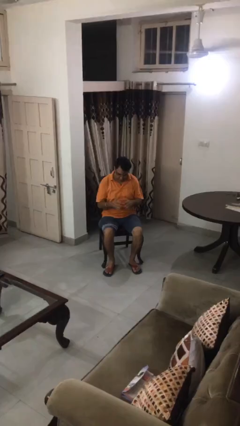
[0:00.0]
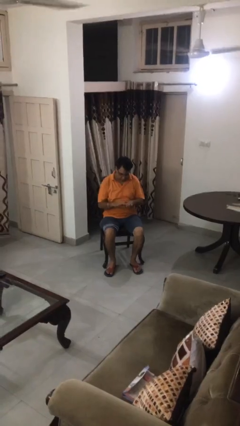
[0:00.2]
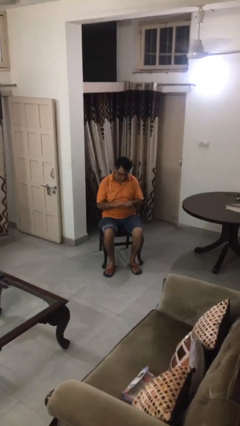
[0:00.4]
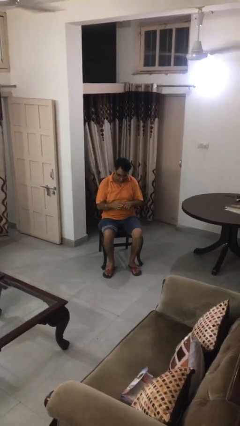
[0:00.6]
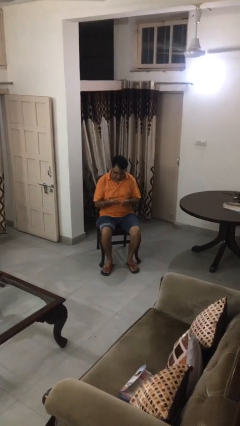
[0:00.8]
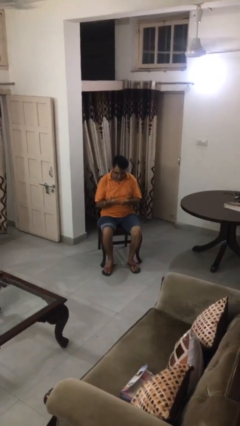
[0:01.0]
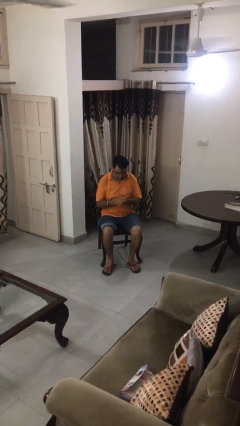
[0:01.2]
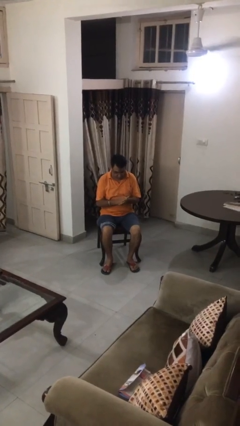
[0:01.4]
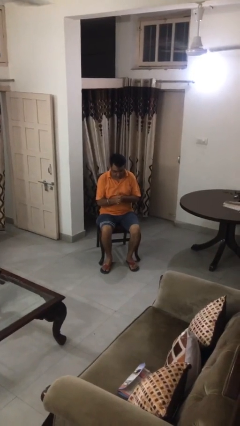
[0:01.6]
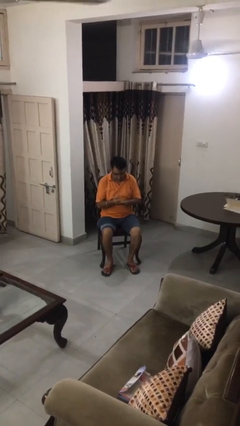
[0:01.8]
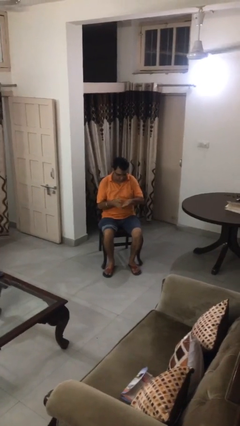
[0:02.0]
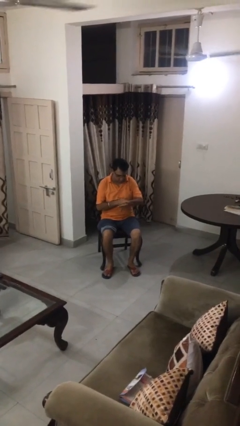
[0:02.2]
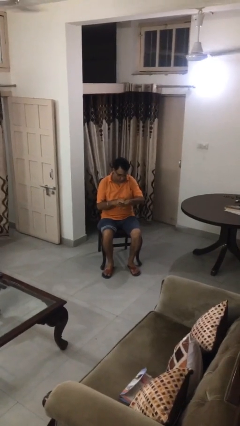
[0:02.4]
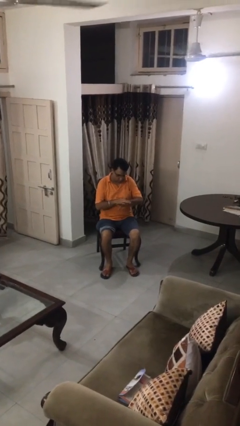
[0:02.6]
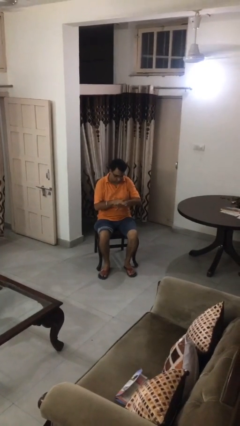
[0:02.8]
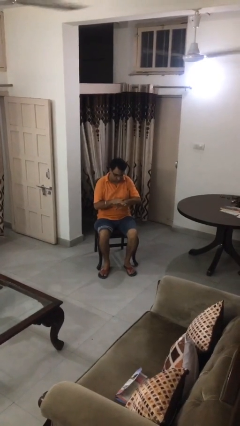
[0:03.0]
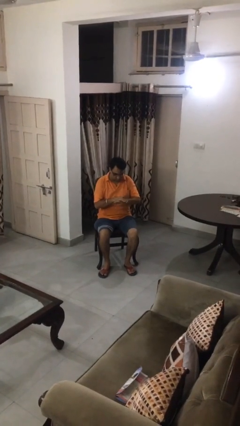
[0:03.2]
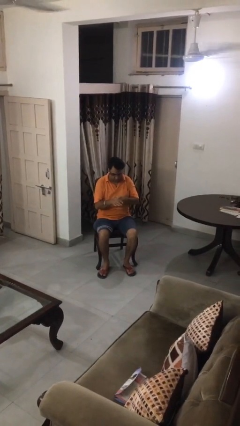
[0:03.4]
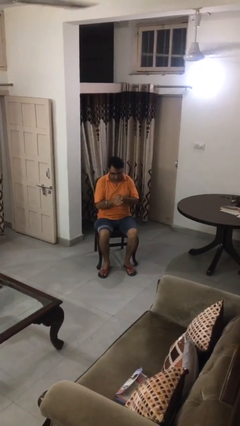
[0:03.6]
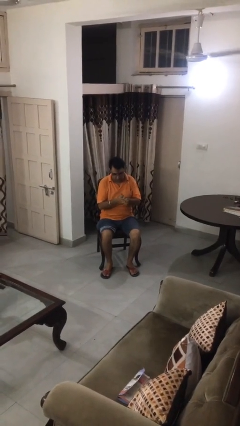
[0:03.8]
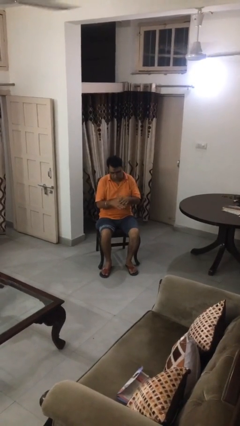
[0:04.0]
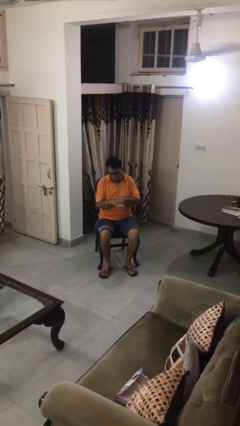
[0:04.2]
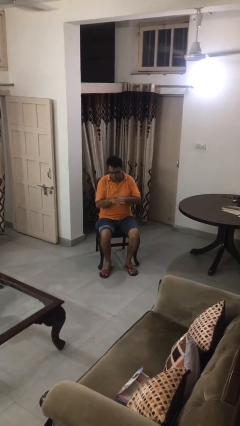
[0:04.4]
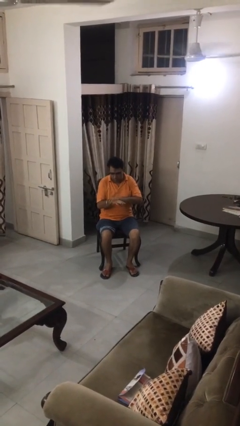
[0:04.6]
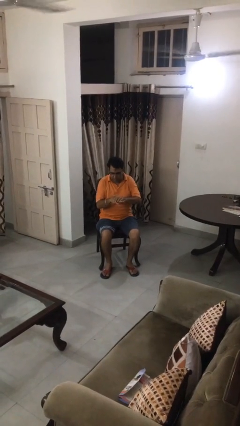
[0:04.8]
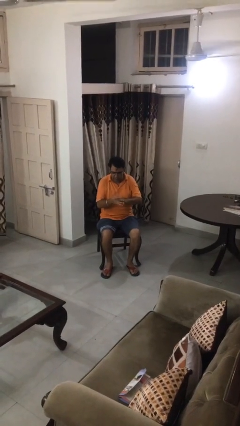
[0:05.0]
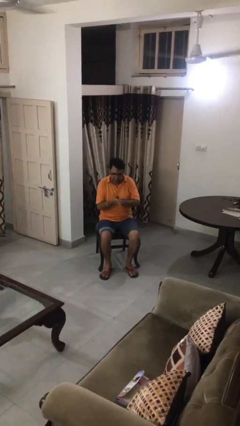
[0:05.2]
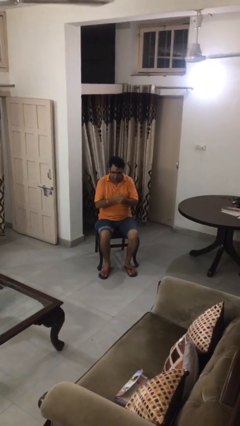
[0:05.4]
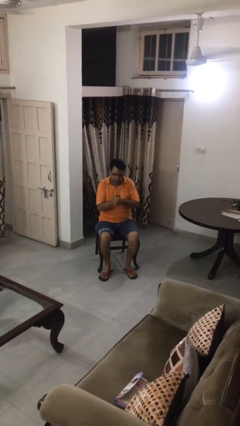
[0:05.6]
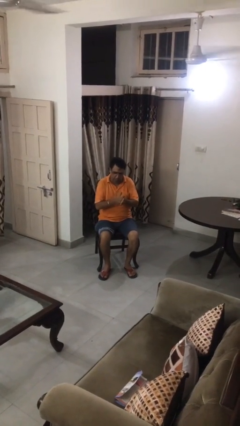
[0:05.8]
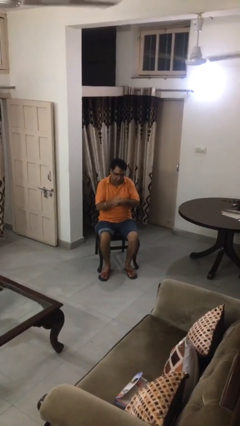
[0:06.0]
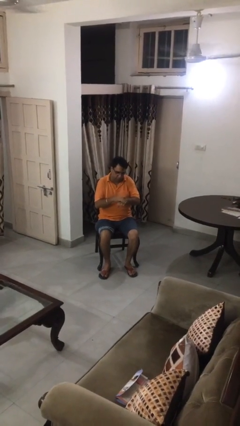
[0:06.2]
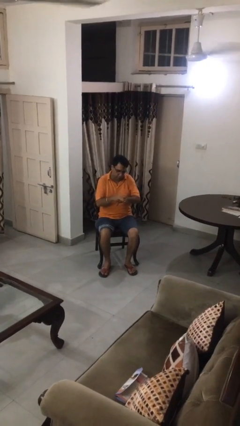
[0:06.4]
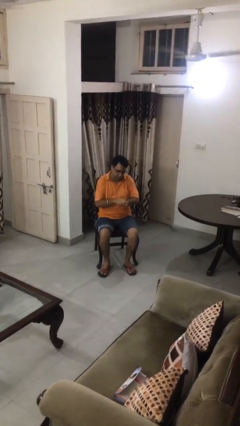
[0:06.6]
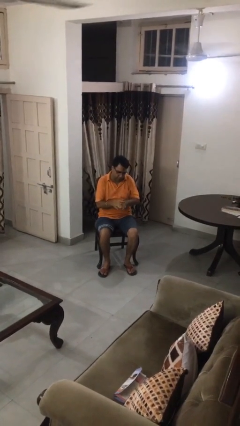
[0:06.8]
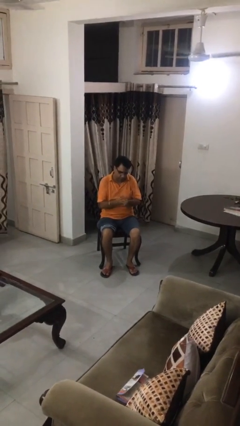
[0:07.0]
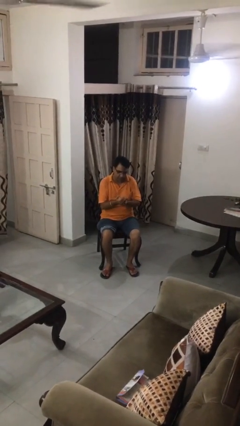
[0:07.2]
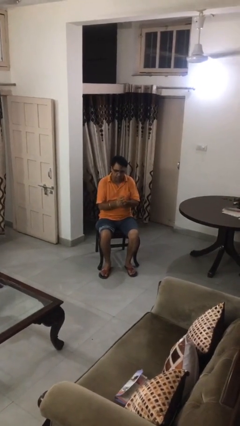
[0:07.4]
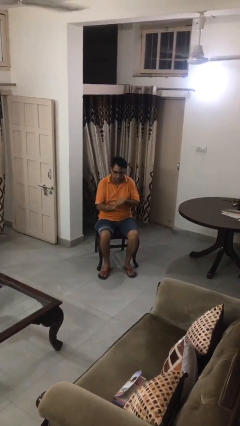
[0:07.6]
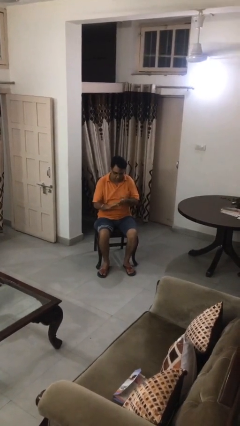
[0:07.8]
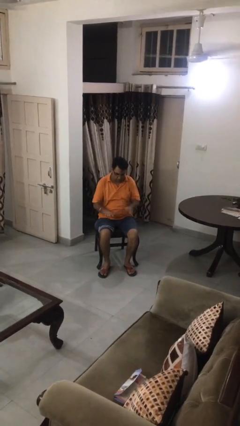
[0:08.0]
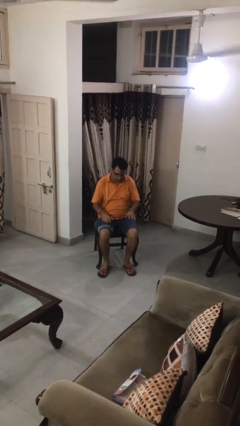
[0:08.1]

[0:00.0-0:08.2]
person looks at hands in lap

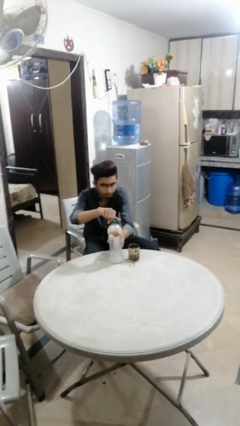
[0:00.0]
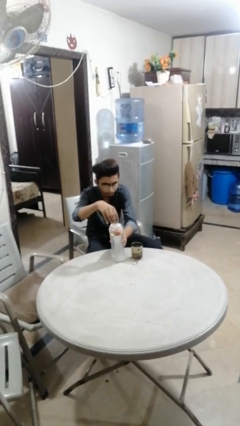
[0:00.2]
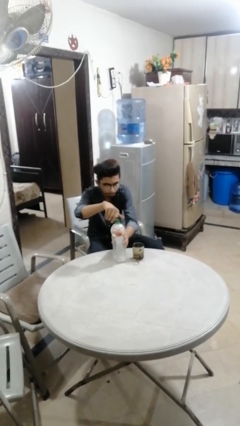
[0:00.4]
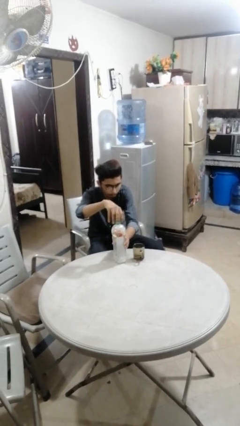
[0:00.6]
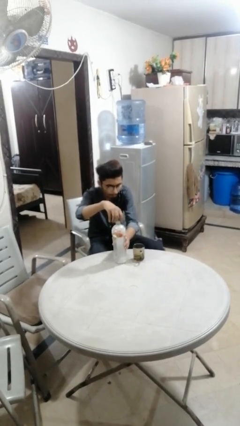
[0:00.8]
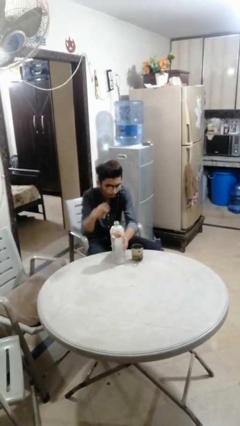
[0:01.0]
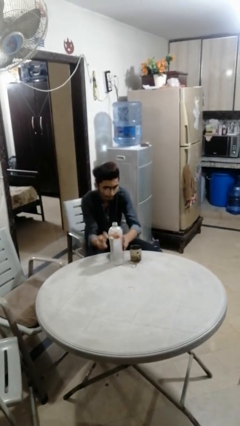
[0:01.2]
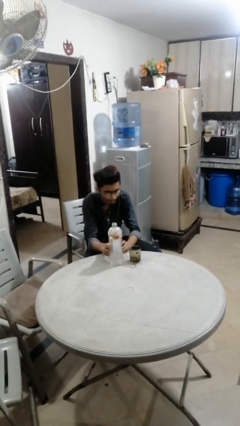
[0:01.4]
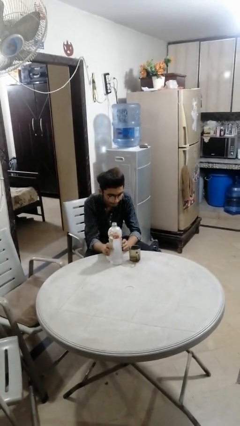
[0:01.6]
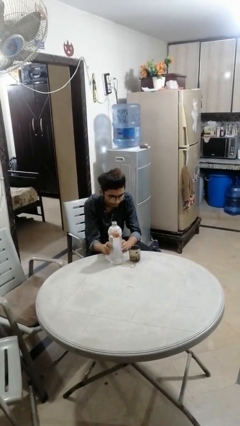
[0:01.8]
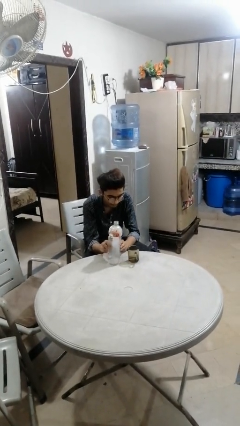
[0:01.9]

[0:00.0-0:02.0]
person unscrews lid from bottle

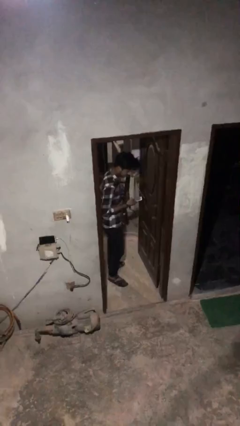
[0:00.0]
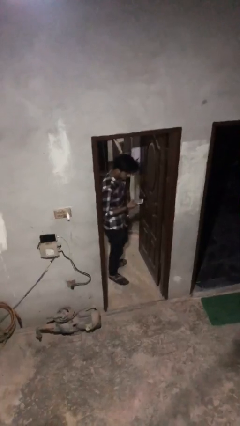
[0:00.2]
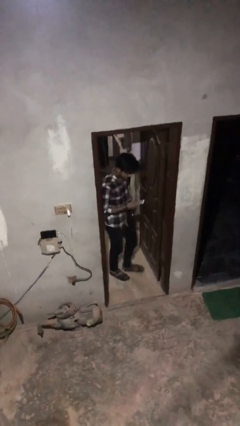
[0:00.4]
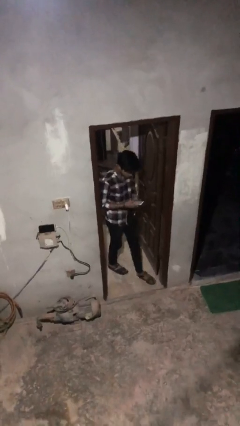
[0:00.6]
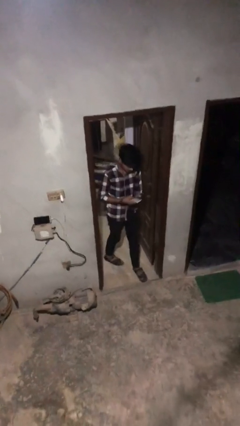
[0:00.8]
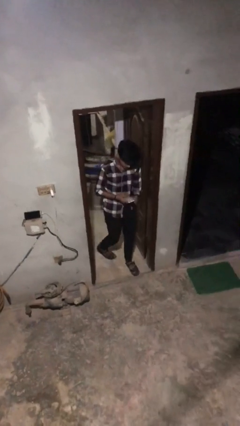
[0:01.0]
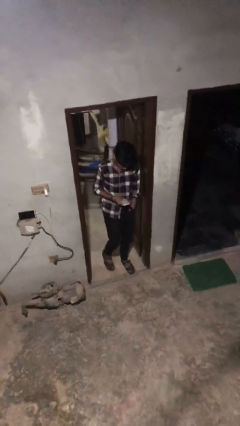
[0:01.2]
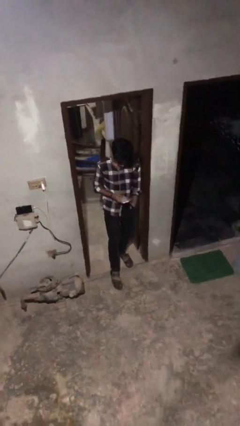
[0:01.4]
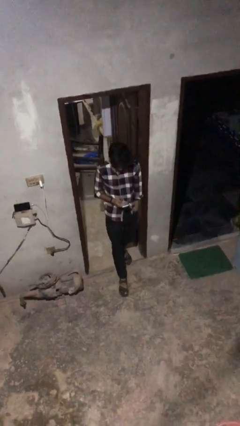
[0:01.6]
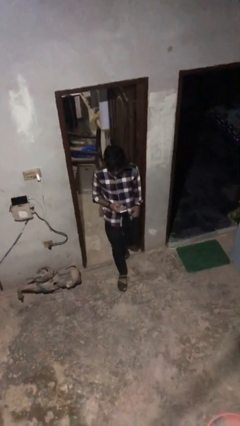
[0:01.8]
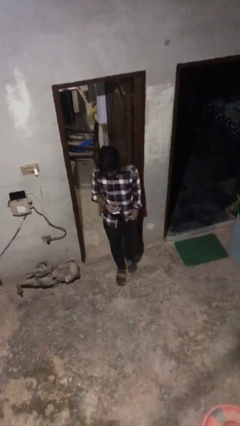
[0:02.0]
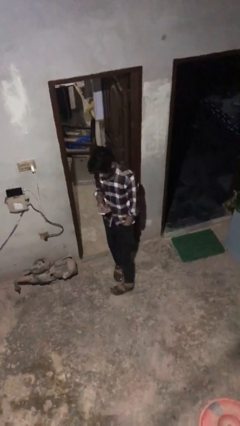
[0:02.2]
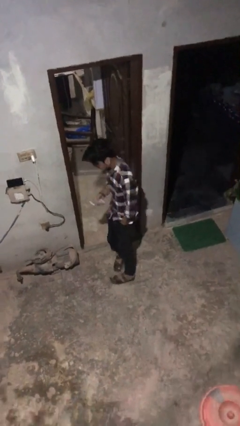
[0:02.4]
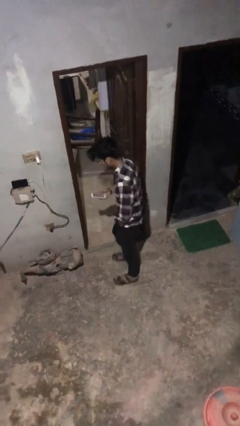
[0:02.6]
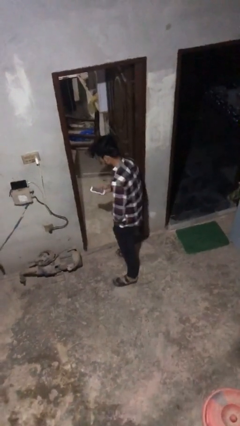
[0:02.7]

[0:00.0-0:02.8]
person enters scene through structure

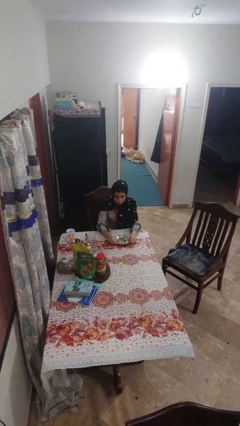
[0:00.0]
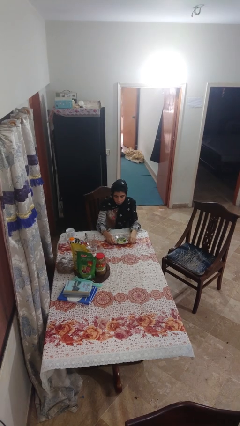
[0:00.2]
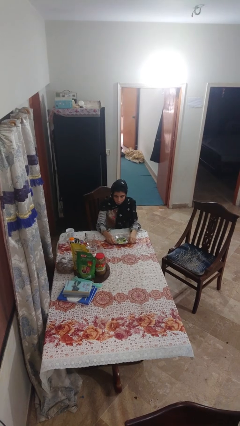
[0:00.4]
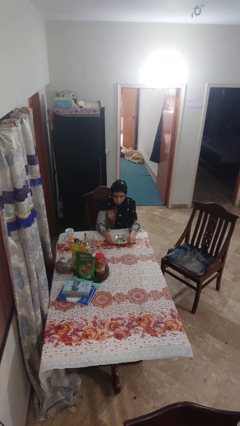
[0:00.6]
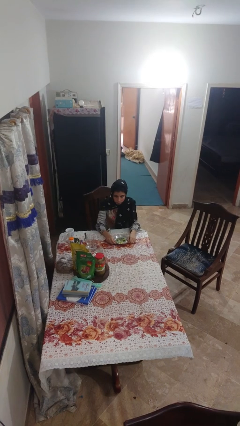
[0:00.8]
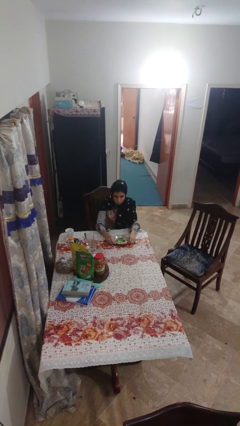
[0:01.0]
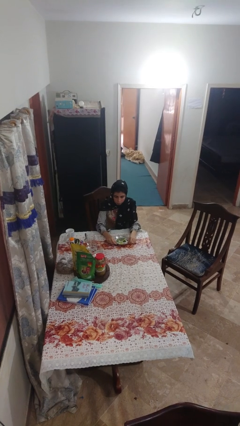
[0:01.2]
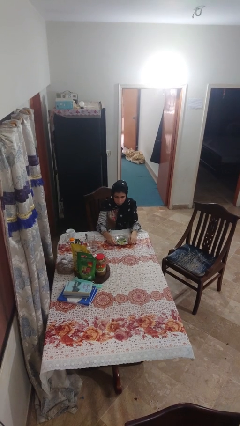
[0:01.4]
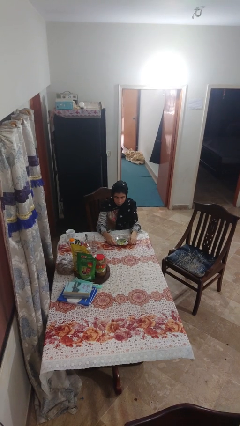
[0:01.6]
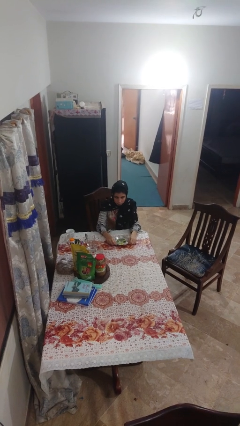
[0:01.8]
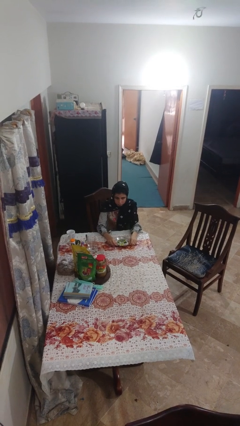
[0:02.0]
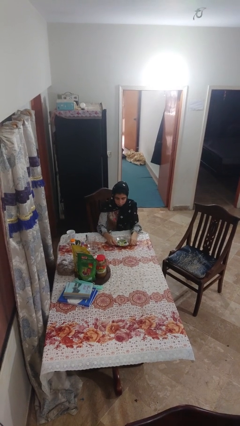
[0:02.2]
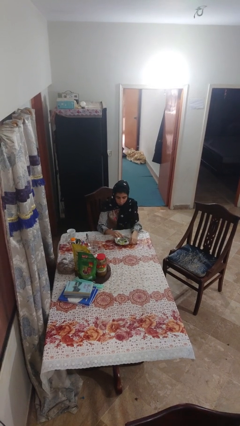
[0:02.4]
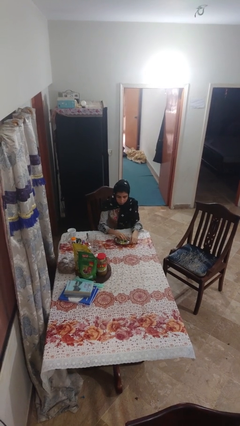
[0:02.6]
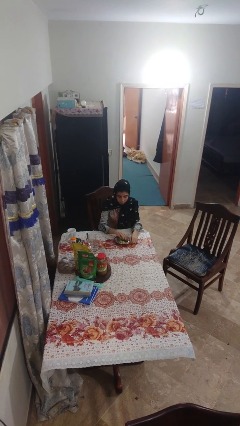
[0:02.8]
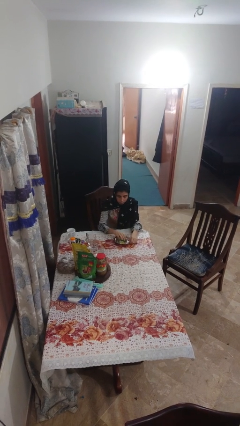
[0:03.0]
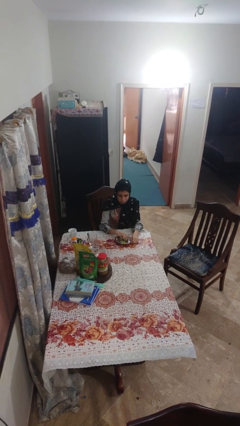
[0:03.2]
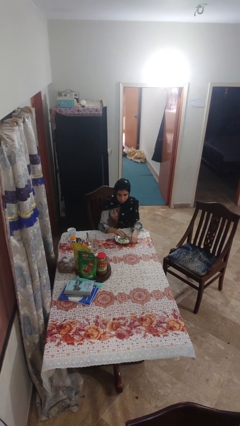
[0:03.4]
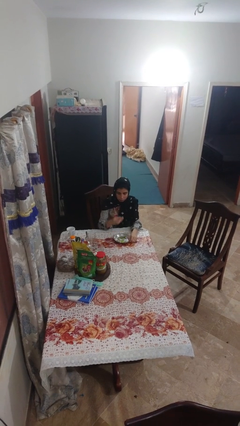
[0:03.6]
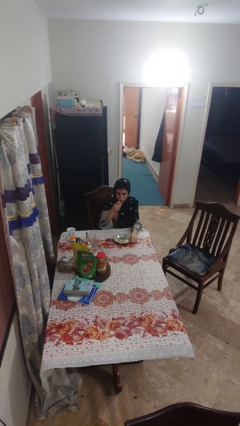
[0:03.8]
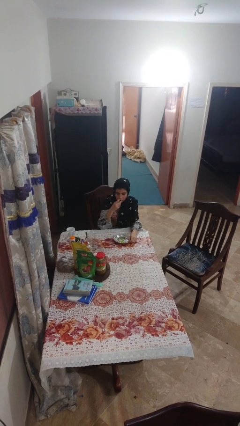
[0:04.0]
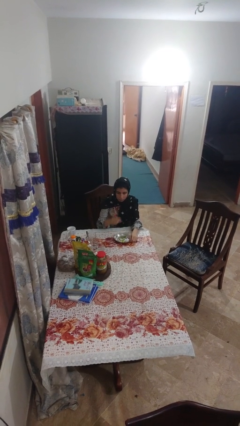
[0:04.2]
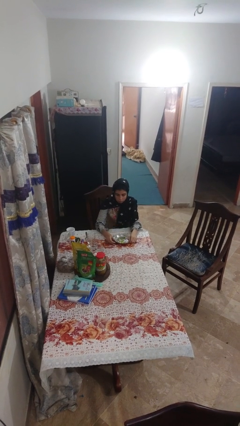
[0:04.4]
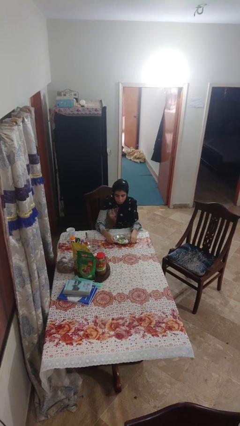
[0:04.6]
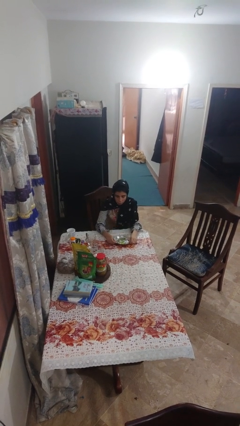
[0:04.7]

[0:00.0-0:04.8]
person eats with hands
